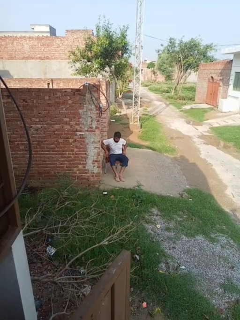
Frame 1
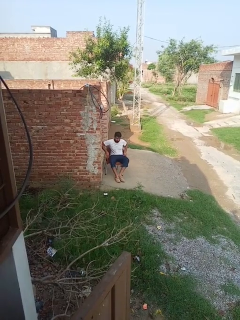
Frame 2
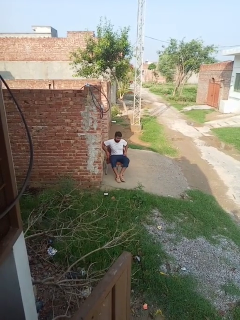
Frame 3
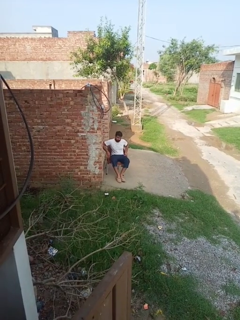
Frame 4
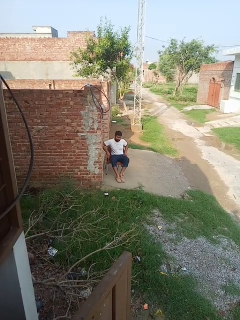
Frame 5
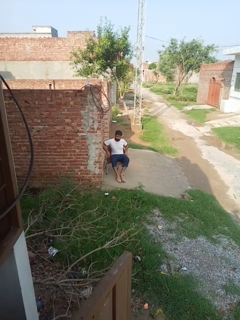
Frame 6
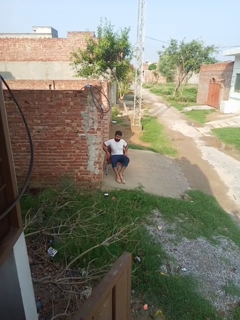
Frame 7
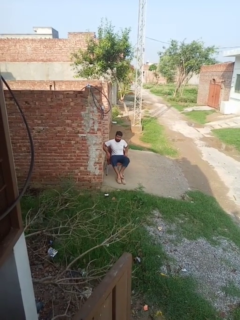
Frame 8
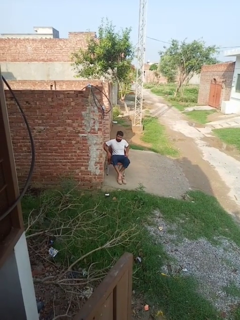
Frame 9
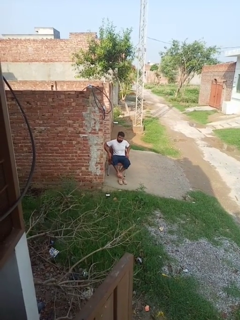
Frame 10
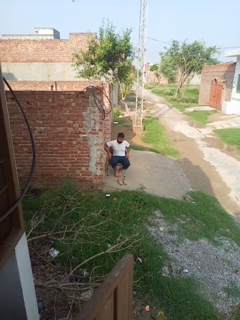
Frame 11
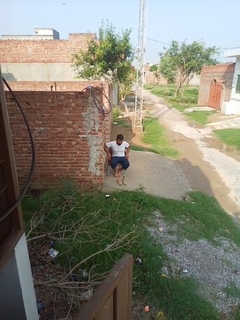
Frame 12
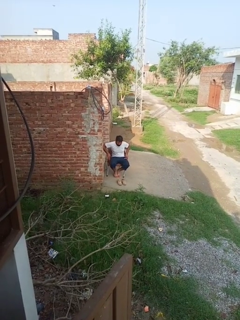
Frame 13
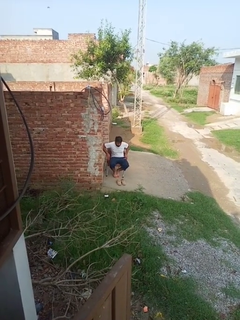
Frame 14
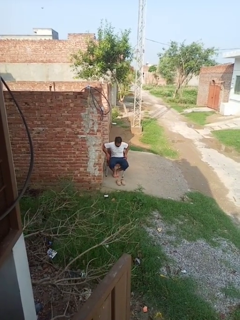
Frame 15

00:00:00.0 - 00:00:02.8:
person takes off shoes

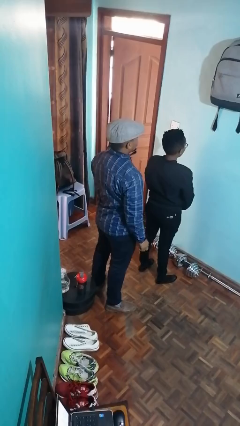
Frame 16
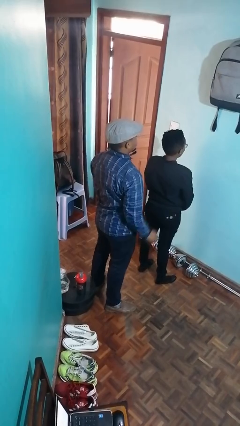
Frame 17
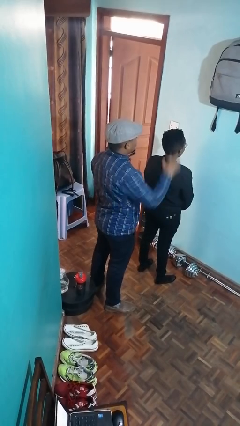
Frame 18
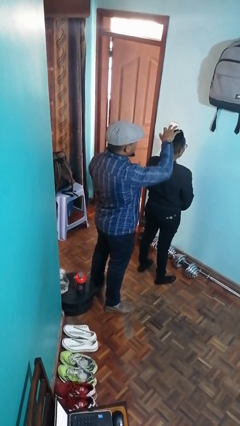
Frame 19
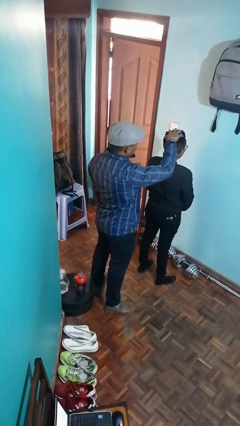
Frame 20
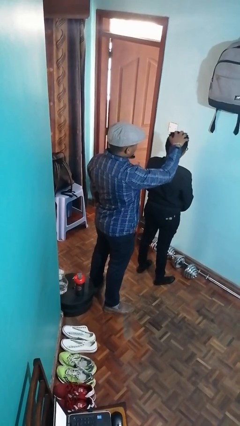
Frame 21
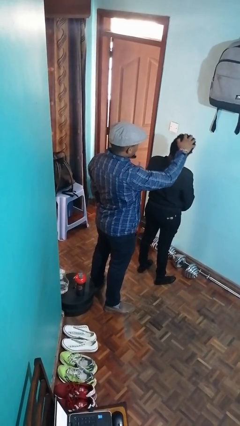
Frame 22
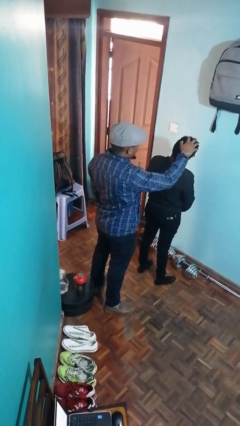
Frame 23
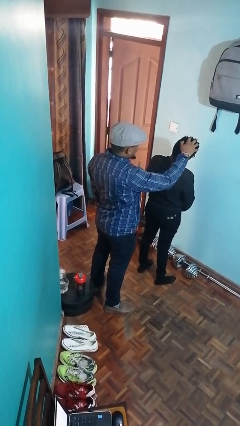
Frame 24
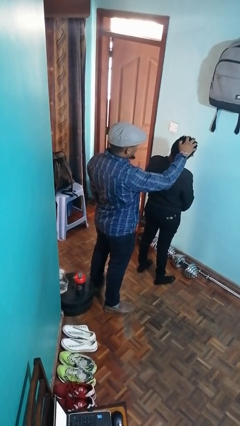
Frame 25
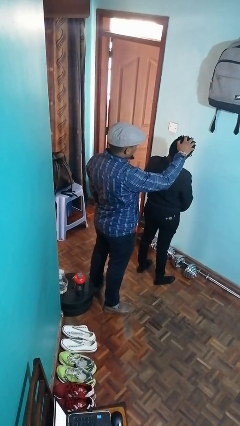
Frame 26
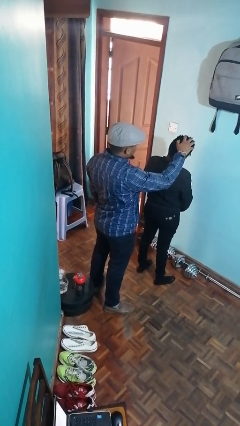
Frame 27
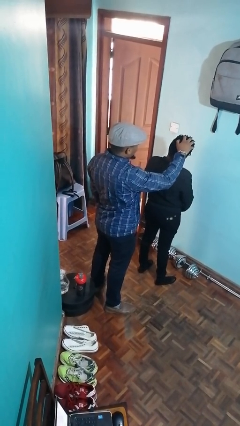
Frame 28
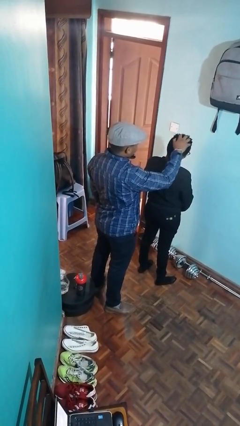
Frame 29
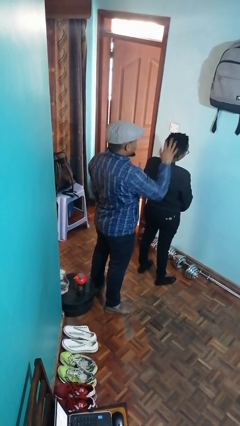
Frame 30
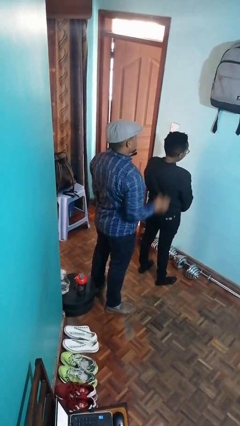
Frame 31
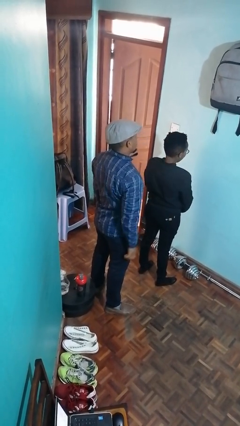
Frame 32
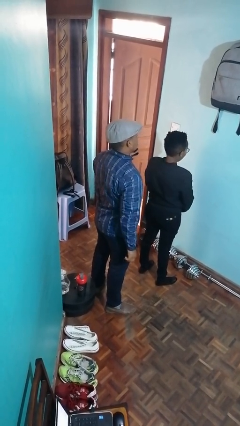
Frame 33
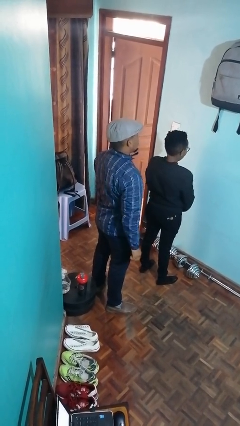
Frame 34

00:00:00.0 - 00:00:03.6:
person grabs person by hair

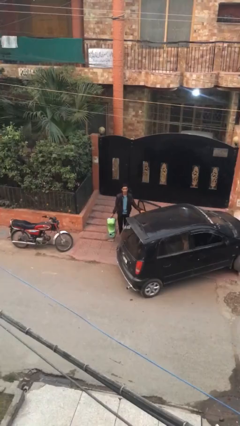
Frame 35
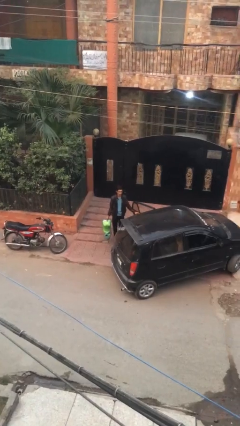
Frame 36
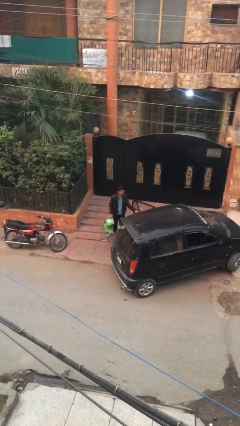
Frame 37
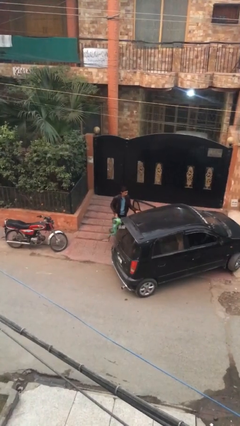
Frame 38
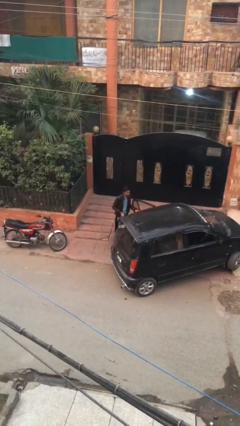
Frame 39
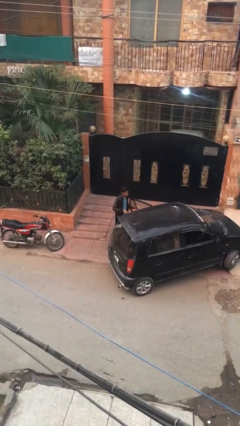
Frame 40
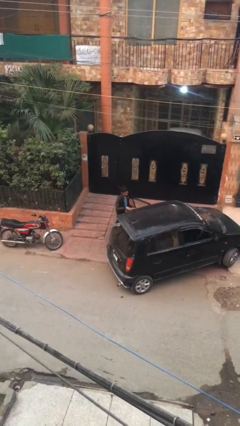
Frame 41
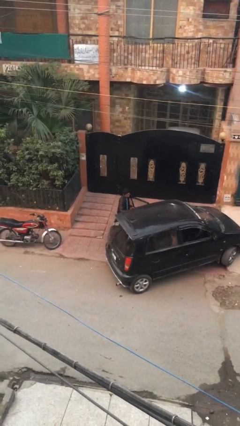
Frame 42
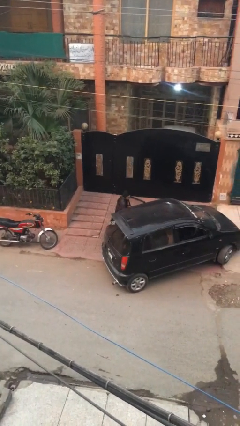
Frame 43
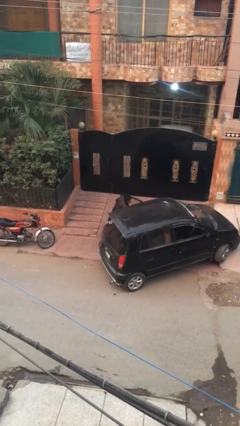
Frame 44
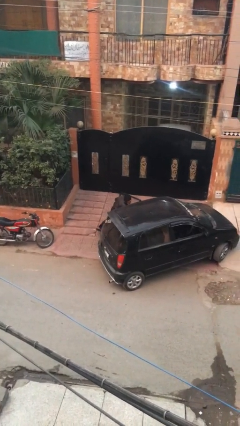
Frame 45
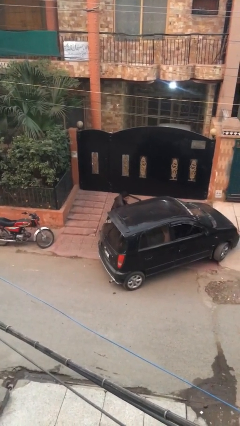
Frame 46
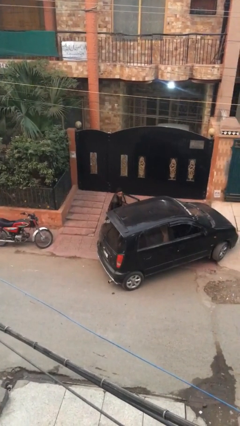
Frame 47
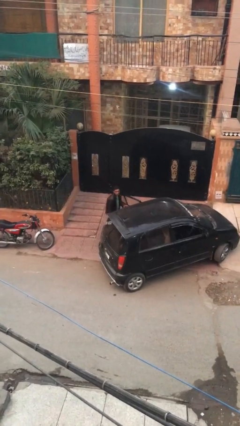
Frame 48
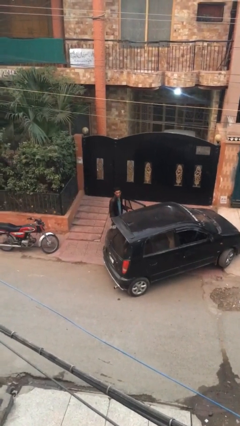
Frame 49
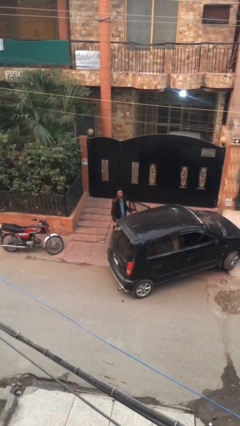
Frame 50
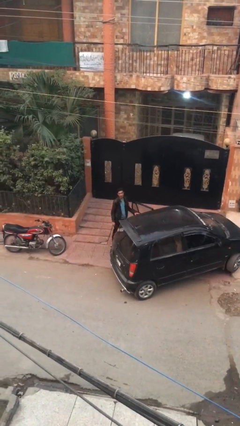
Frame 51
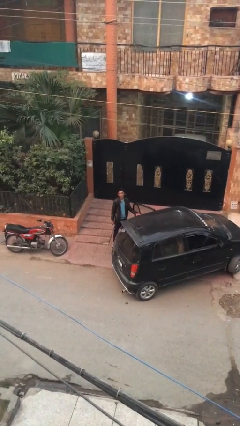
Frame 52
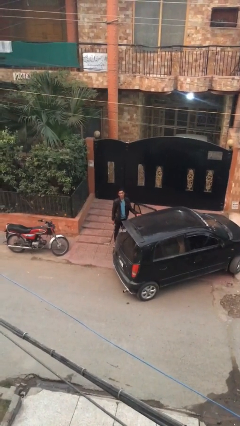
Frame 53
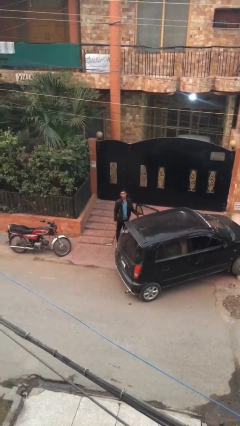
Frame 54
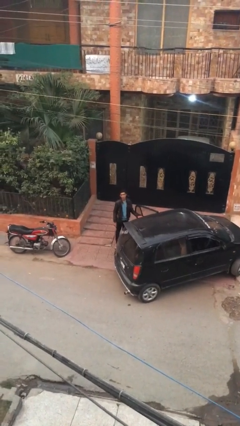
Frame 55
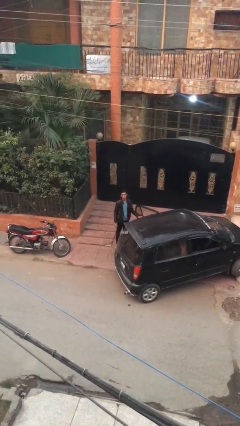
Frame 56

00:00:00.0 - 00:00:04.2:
person loads car

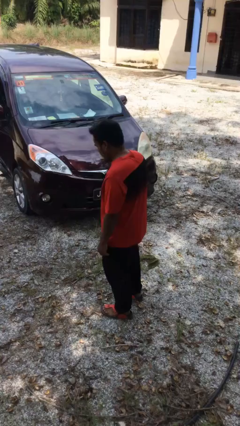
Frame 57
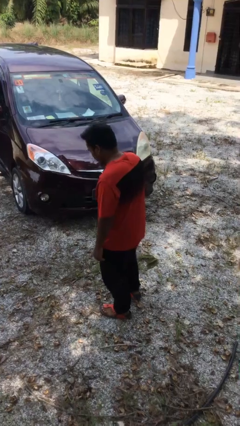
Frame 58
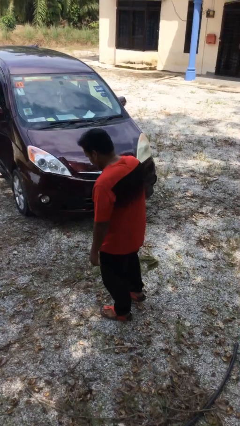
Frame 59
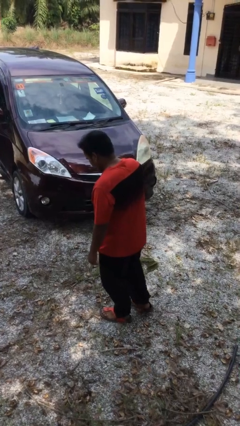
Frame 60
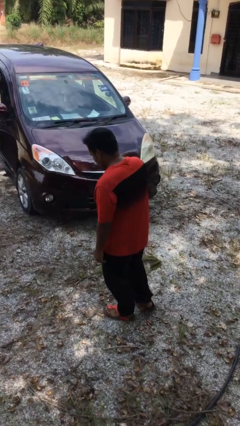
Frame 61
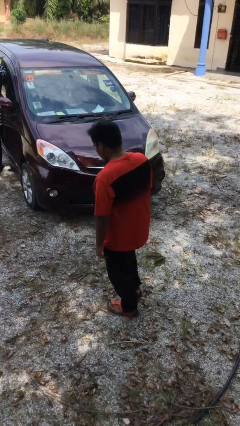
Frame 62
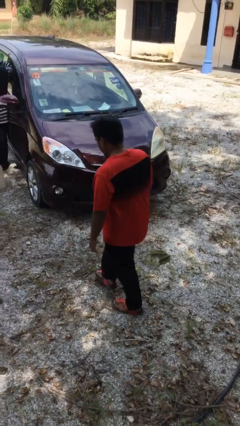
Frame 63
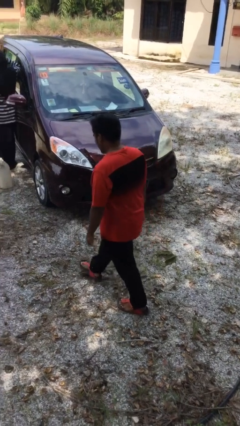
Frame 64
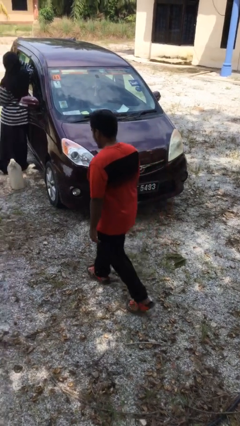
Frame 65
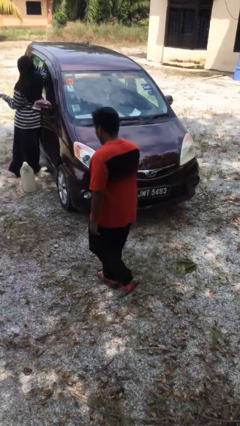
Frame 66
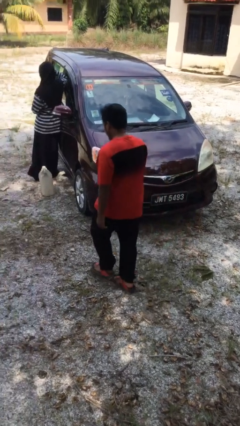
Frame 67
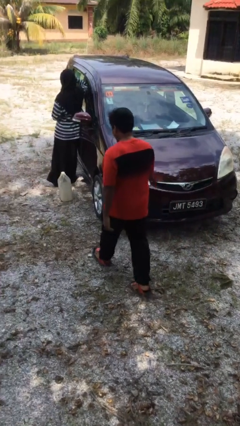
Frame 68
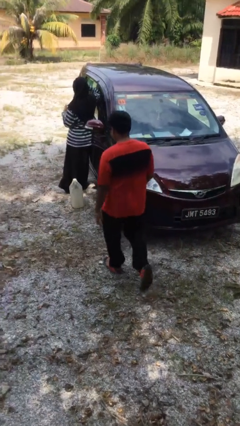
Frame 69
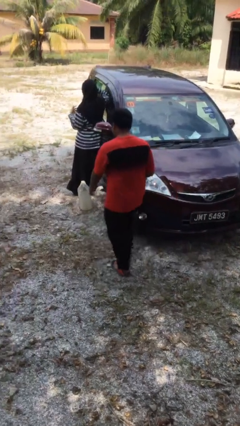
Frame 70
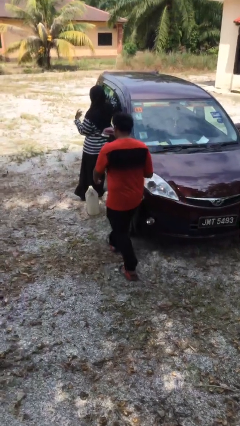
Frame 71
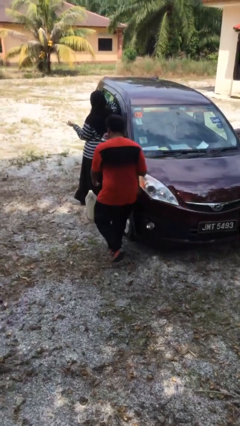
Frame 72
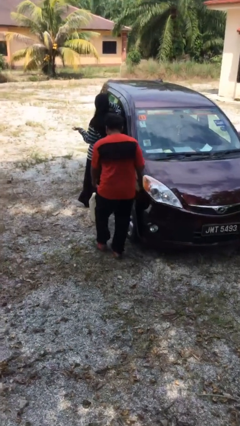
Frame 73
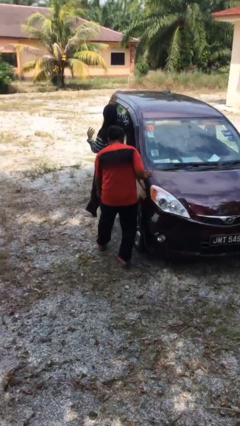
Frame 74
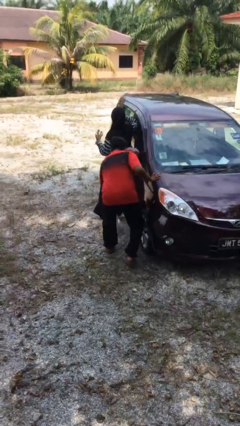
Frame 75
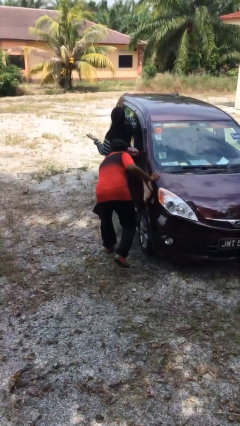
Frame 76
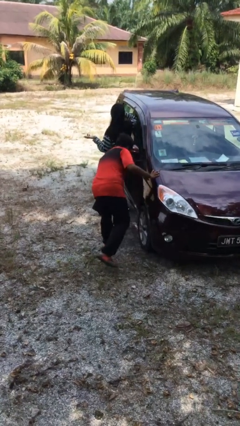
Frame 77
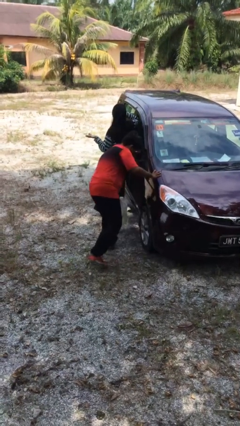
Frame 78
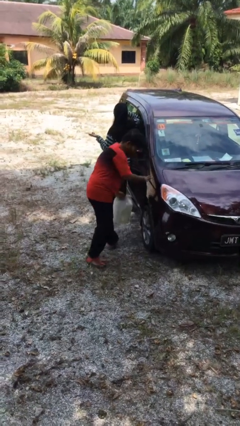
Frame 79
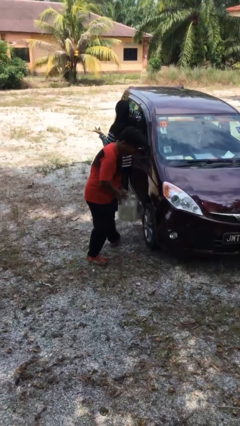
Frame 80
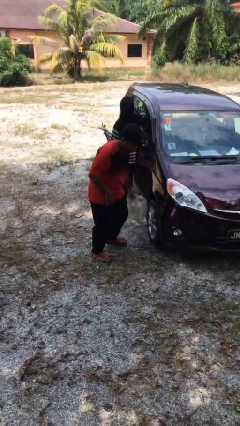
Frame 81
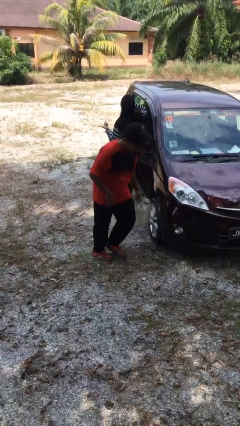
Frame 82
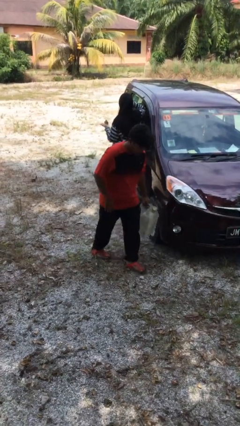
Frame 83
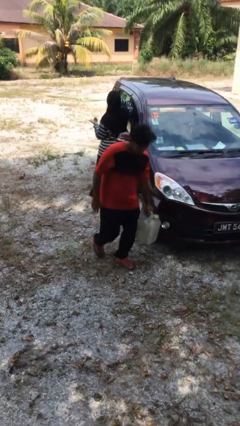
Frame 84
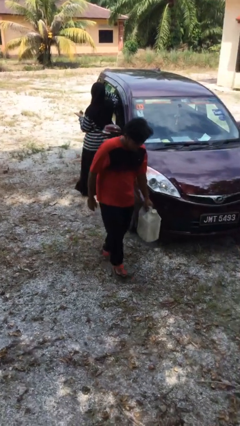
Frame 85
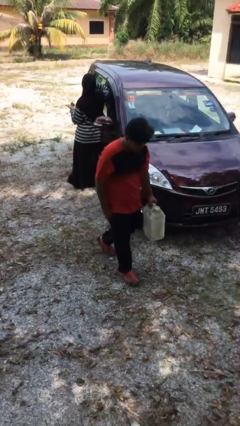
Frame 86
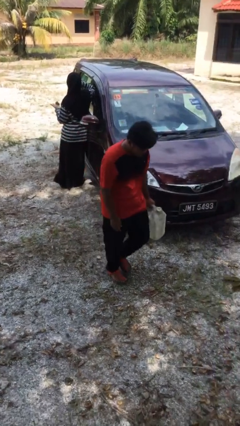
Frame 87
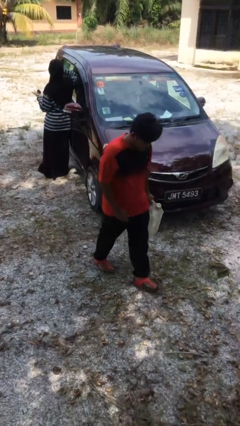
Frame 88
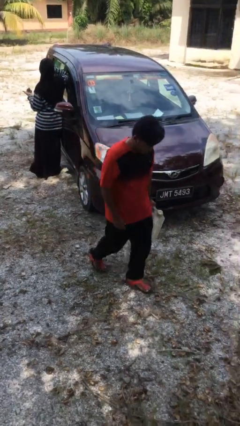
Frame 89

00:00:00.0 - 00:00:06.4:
person steals object from person

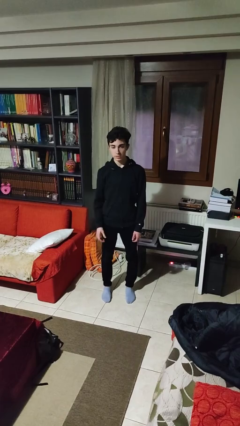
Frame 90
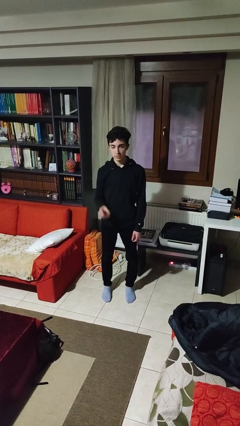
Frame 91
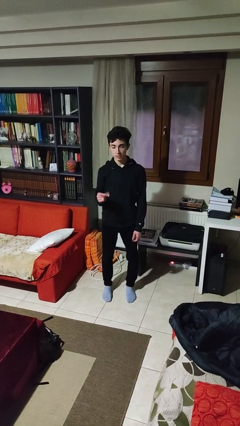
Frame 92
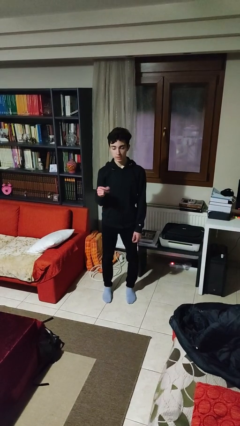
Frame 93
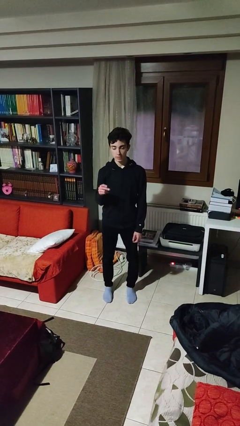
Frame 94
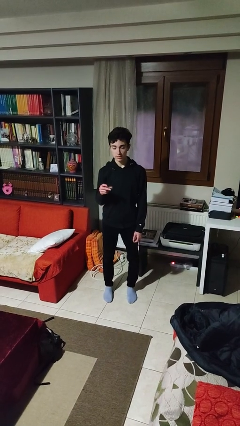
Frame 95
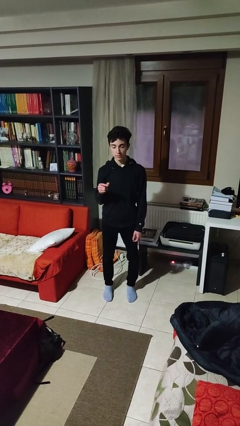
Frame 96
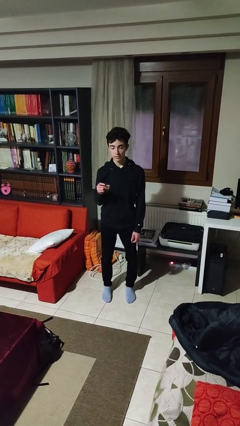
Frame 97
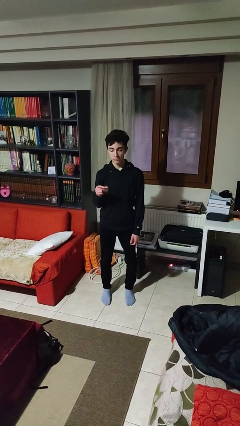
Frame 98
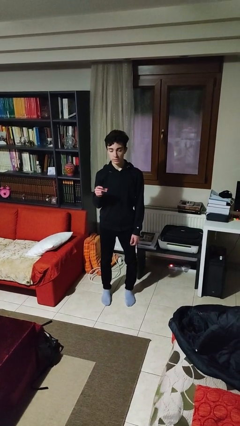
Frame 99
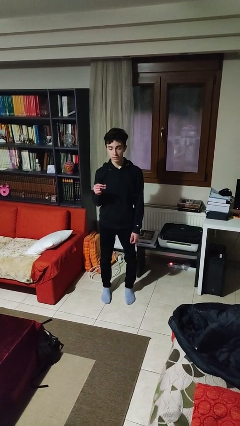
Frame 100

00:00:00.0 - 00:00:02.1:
person snaps fingers
